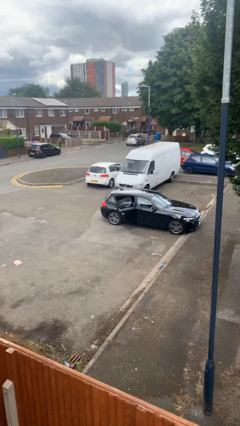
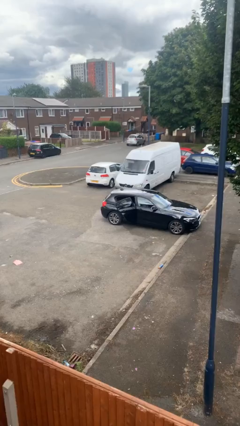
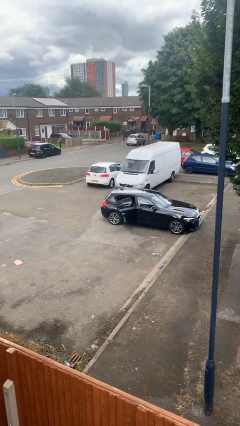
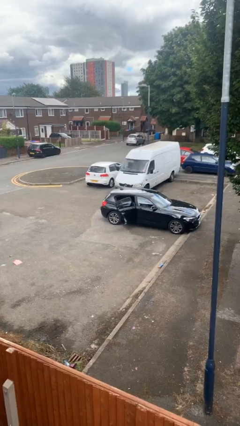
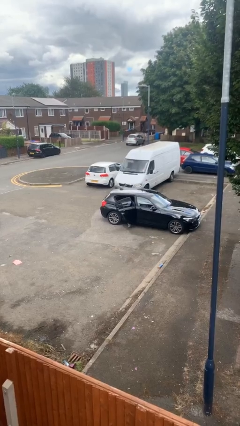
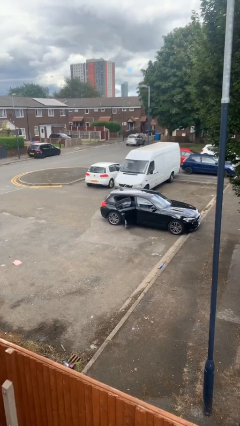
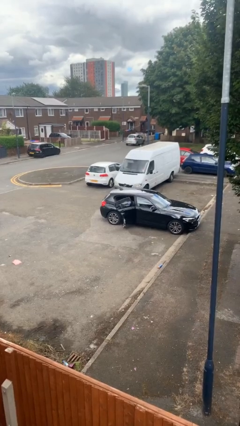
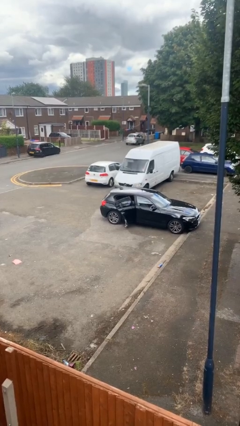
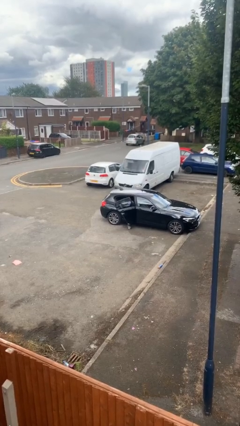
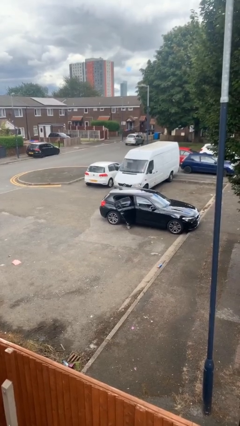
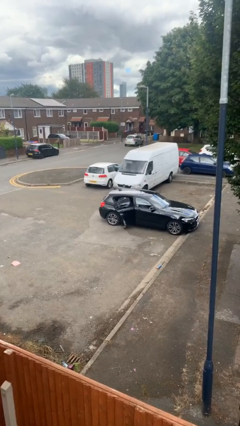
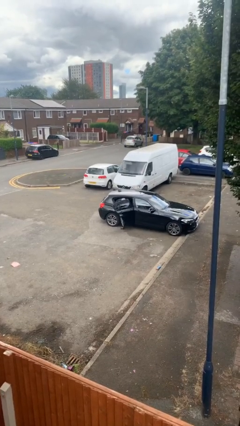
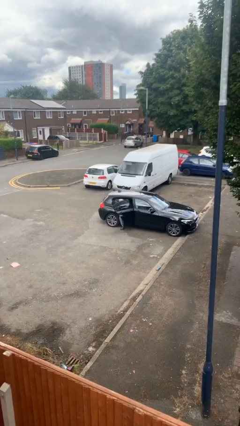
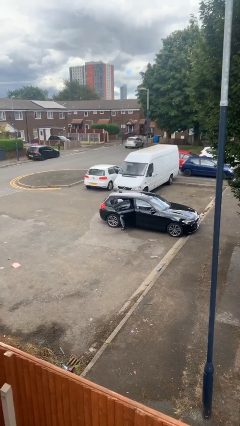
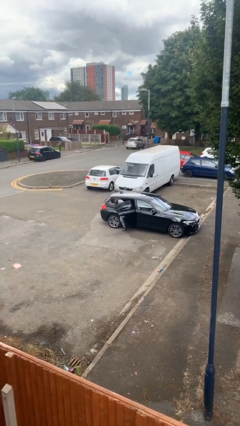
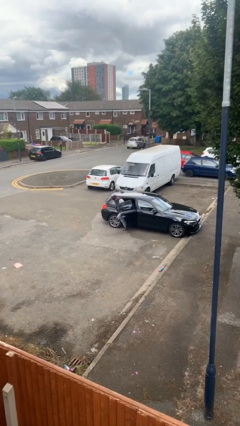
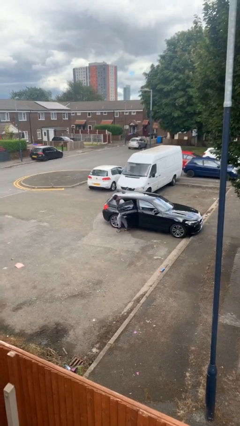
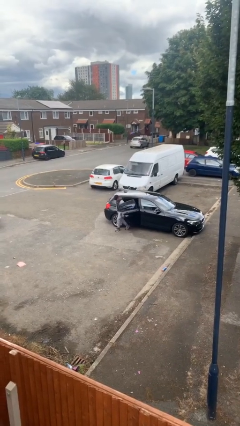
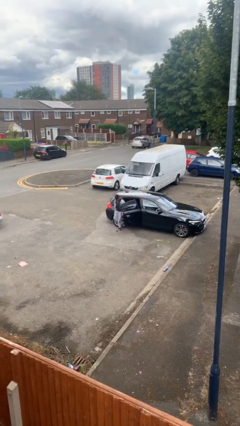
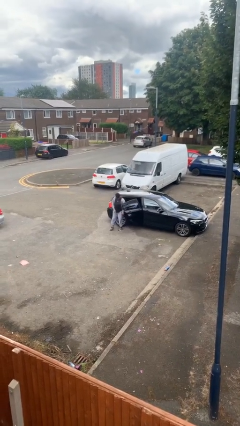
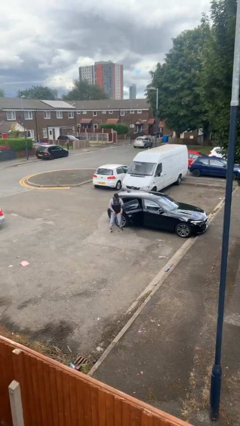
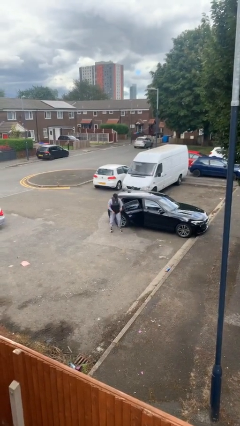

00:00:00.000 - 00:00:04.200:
person exits car

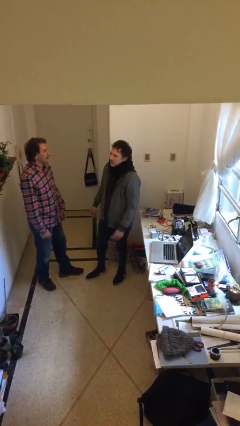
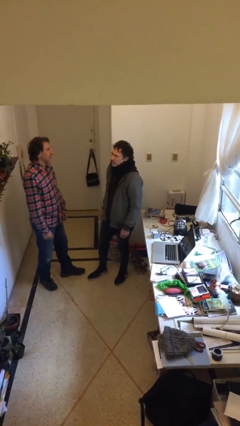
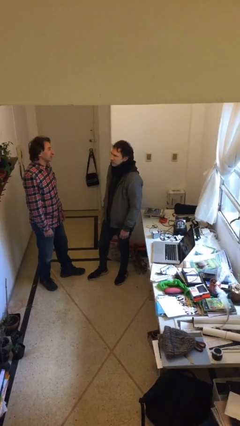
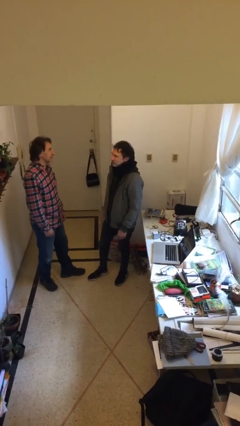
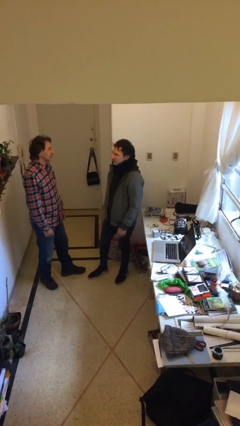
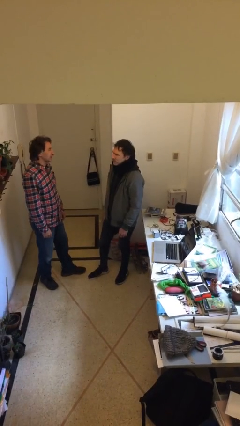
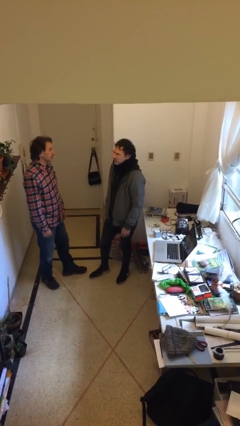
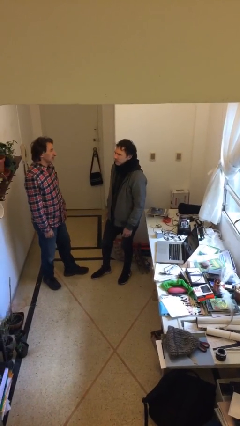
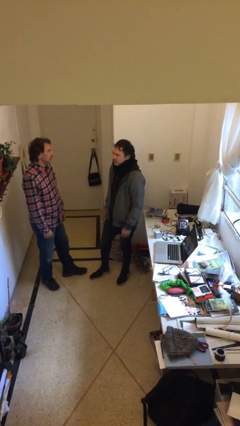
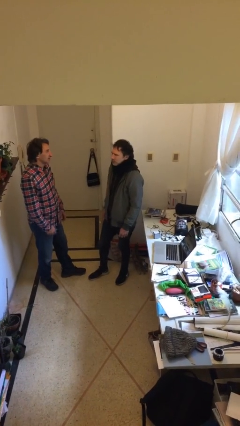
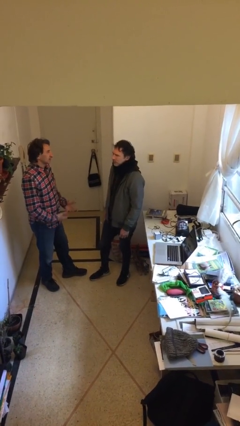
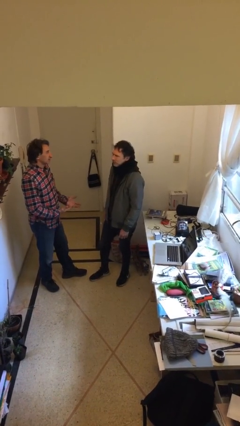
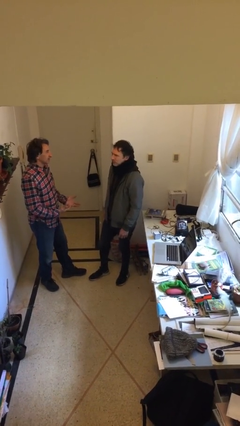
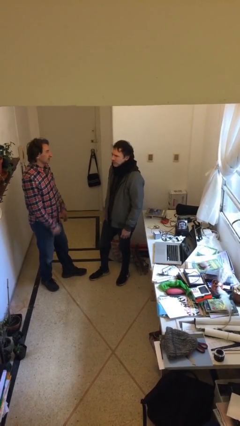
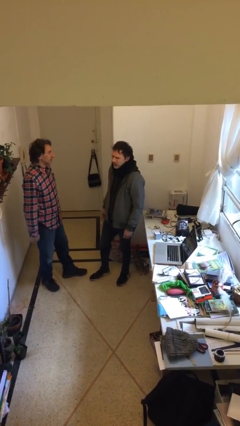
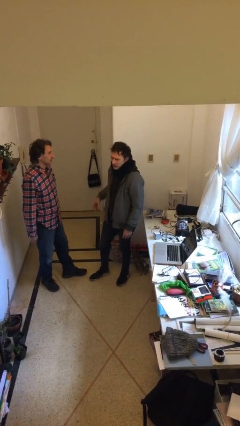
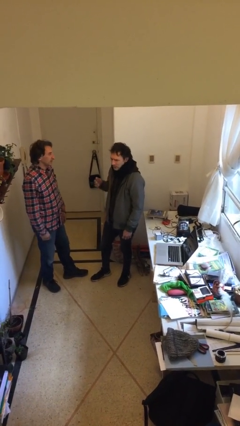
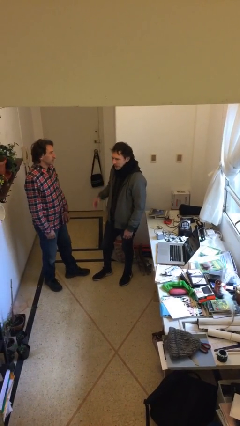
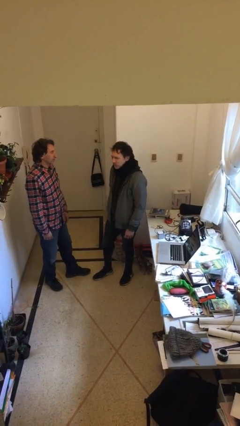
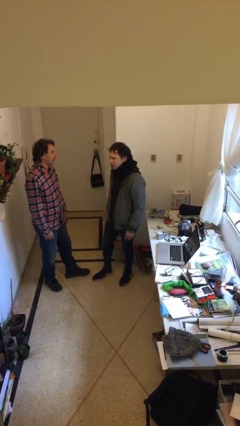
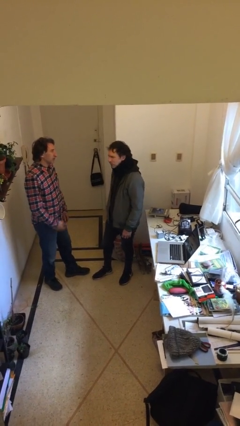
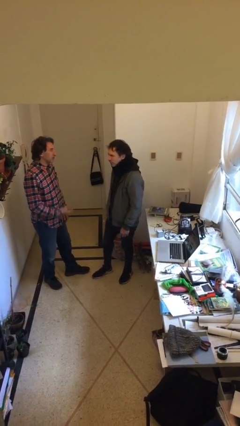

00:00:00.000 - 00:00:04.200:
person talks to person

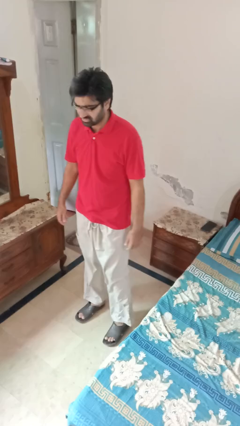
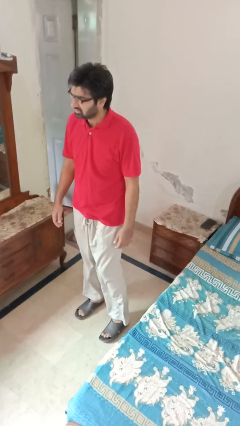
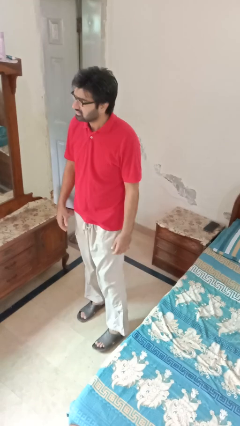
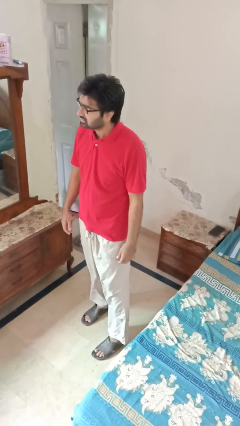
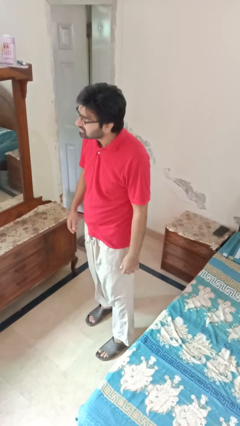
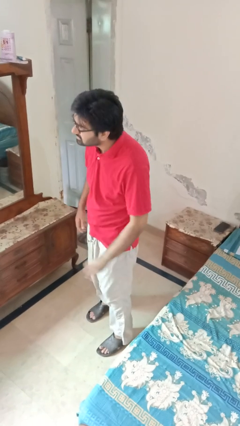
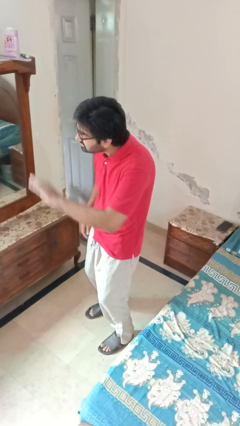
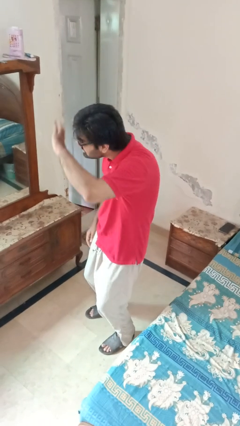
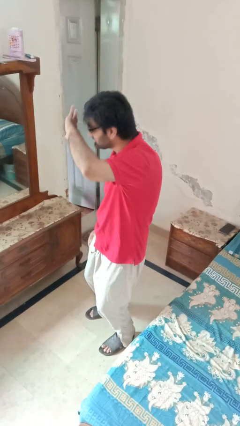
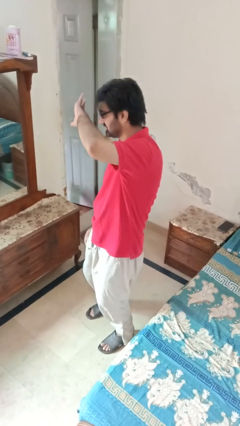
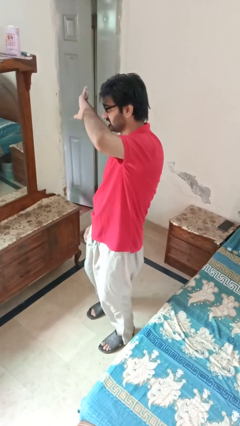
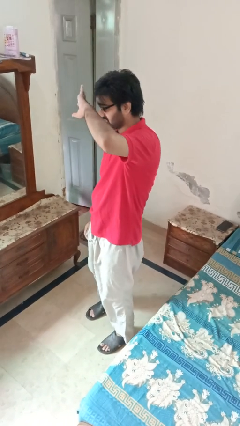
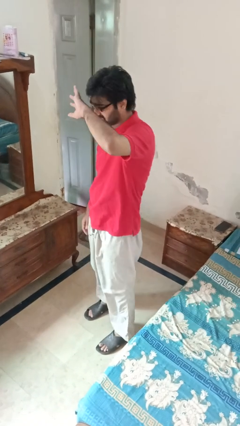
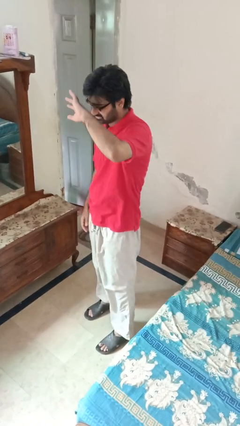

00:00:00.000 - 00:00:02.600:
person shades eyes

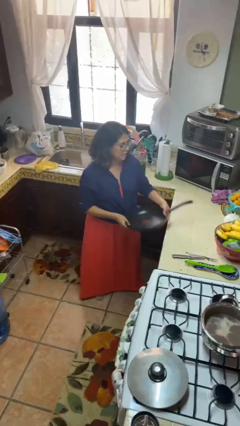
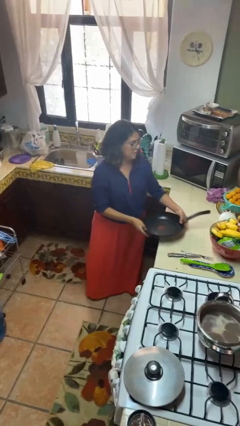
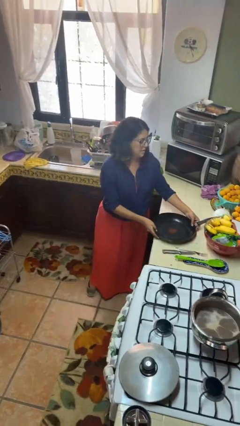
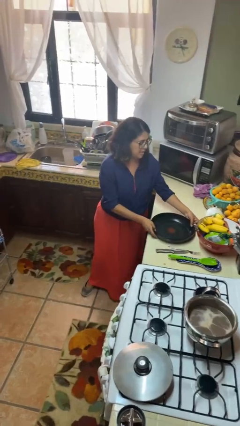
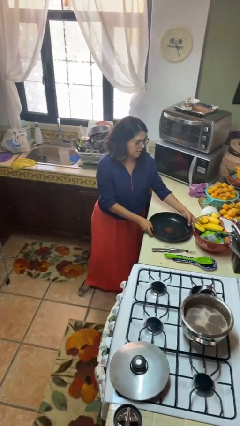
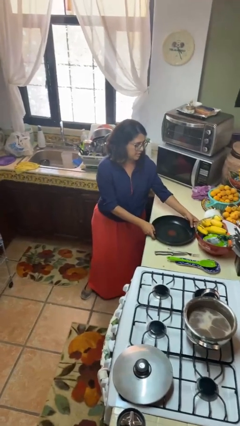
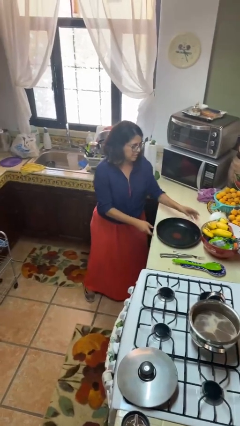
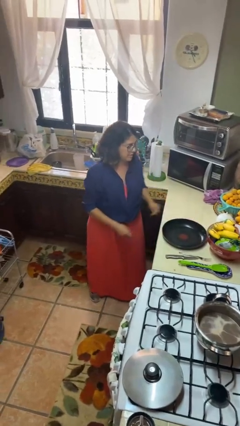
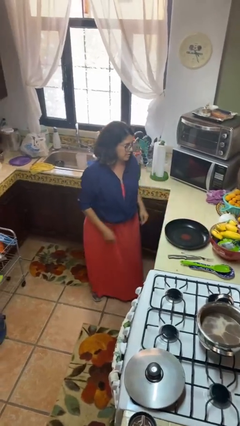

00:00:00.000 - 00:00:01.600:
person puts down object on countertop

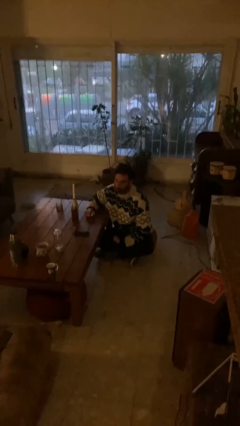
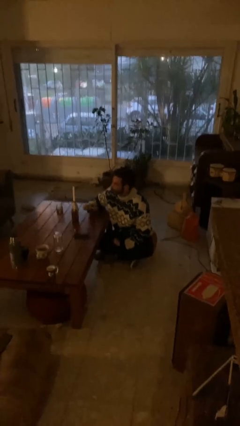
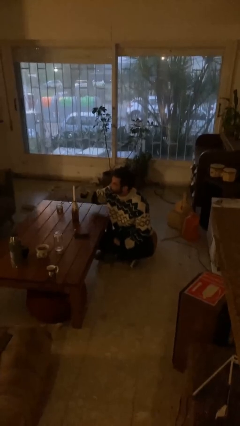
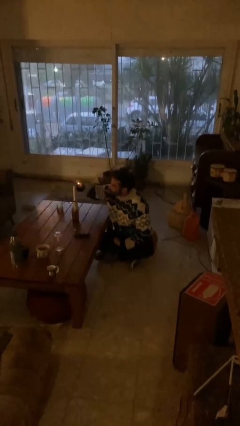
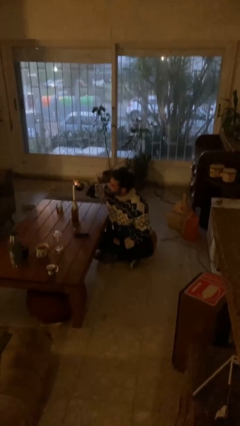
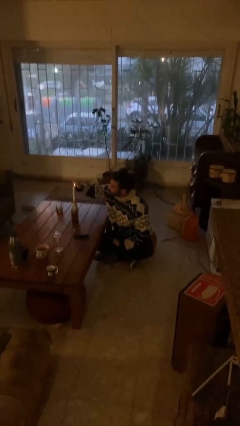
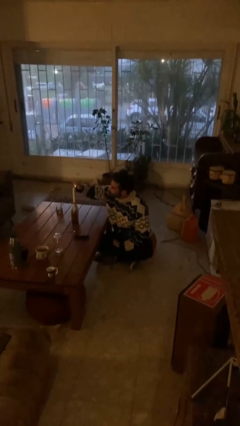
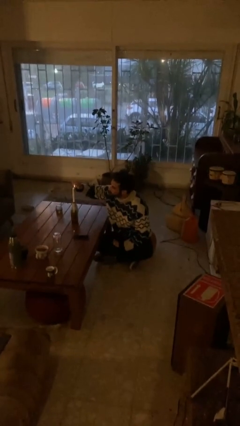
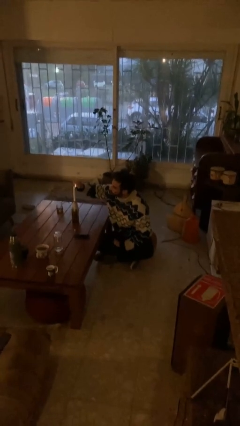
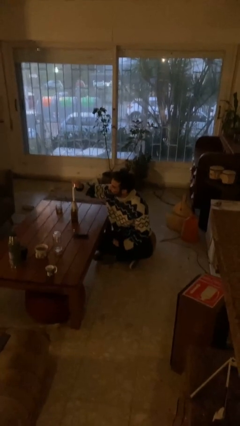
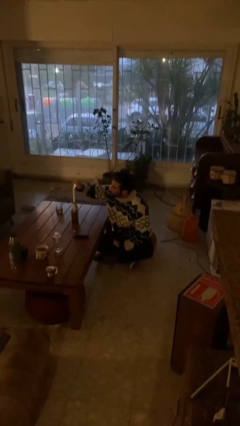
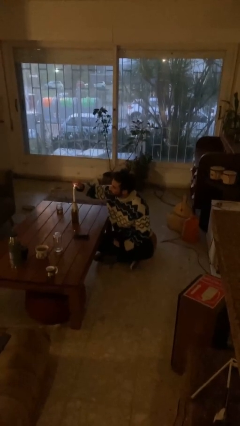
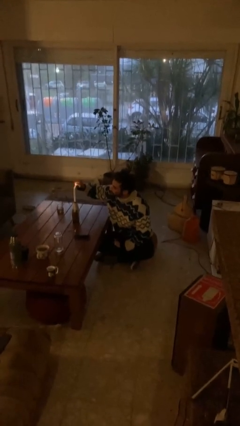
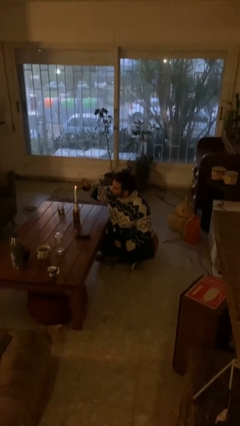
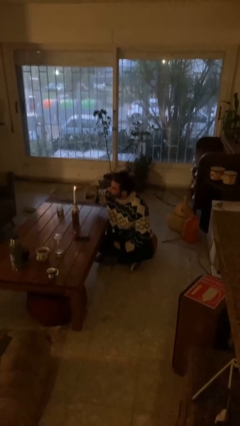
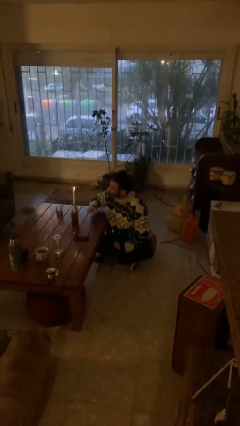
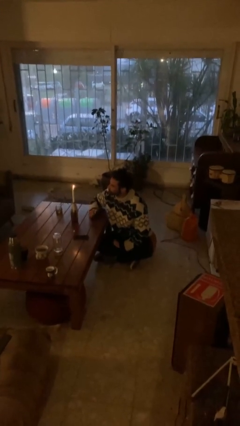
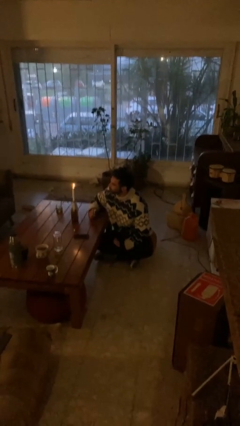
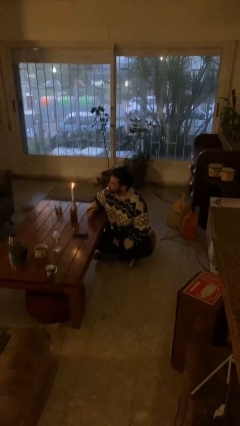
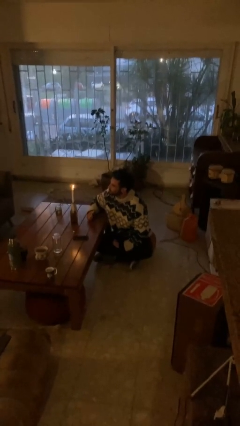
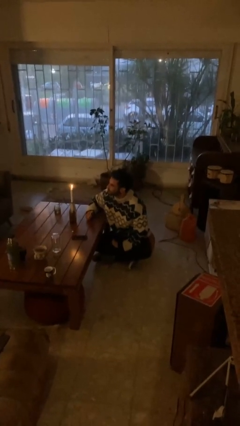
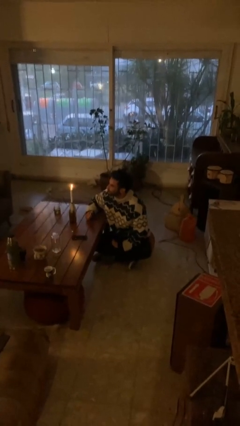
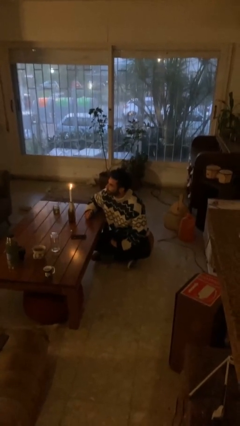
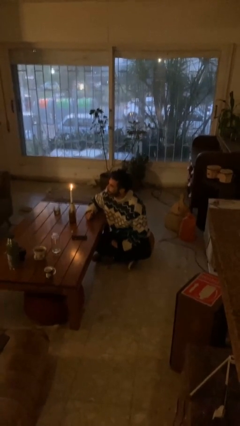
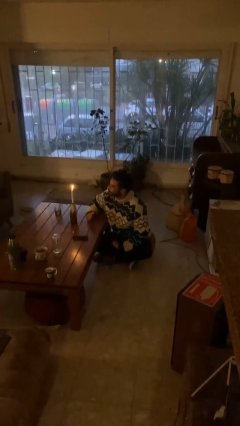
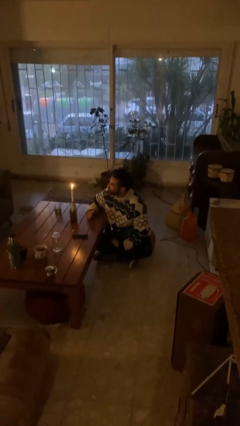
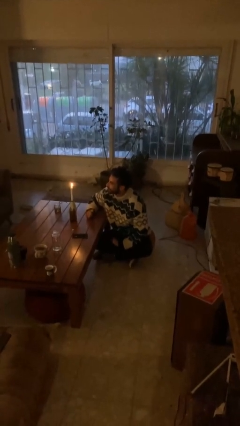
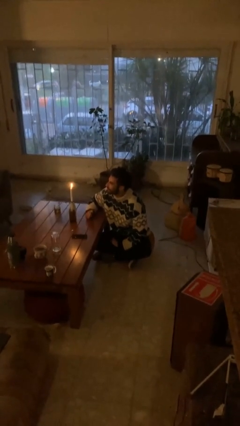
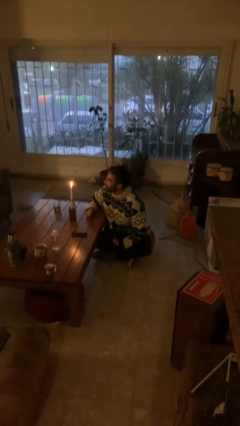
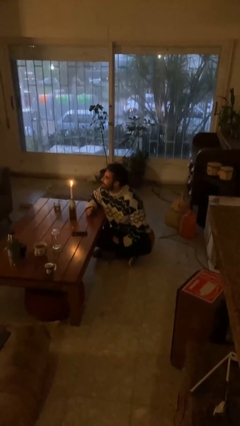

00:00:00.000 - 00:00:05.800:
person lights candle
